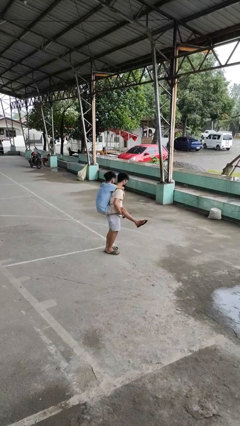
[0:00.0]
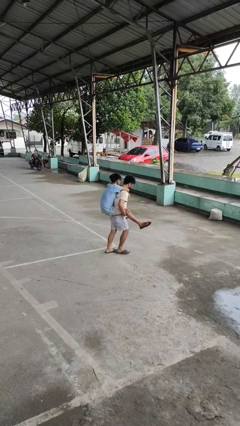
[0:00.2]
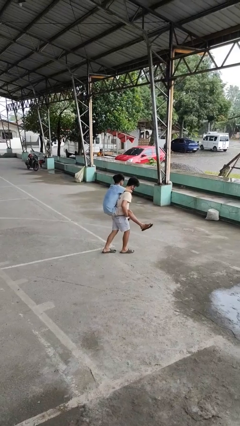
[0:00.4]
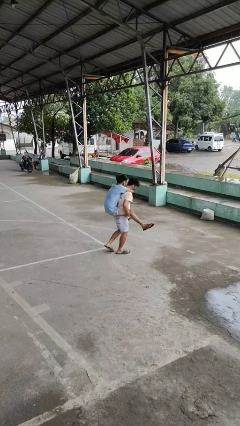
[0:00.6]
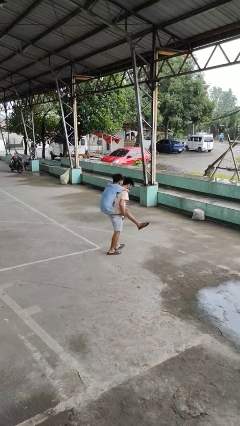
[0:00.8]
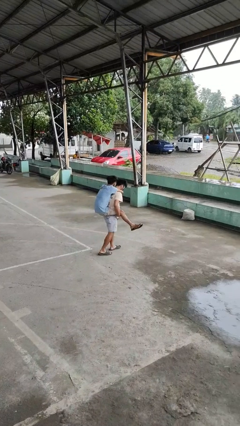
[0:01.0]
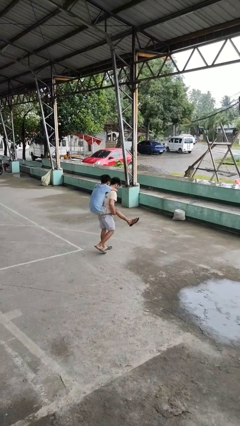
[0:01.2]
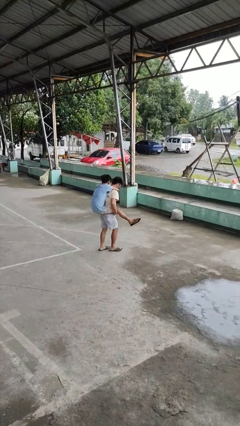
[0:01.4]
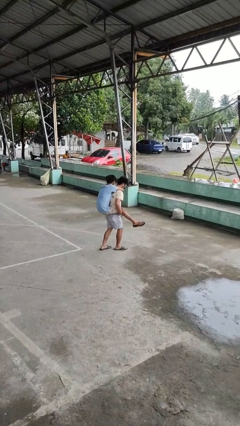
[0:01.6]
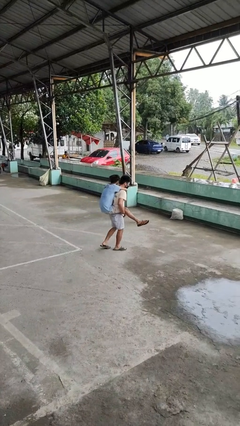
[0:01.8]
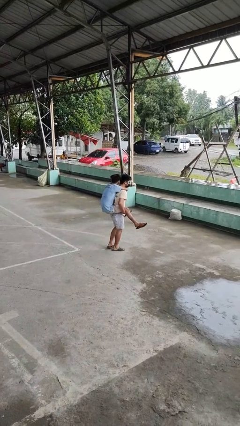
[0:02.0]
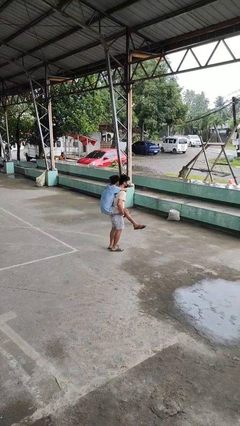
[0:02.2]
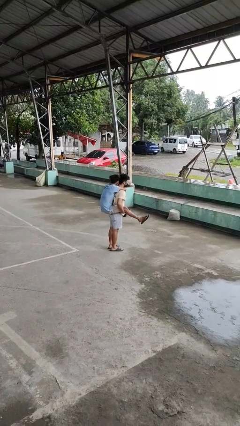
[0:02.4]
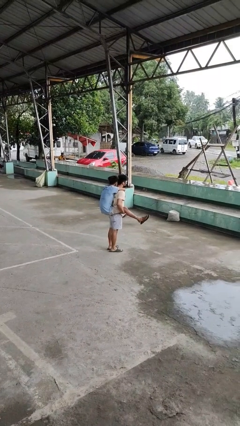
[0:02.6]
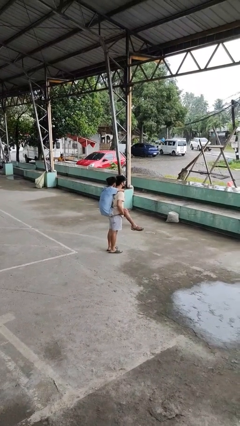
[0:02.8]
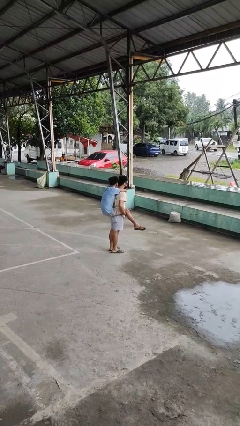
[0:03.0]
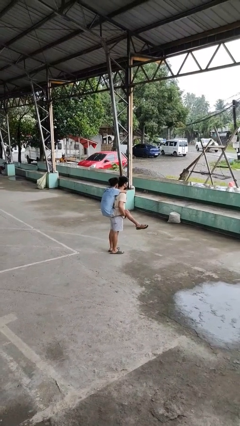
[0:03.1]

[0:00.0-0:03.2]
person carries person on back

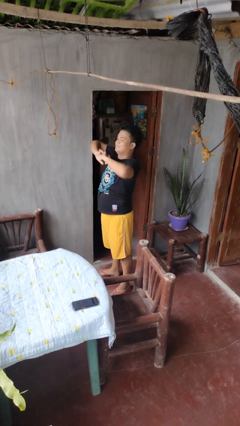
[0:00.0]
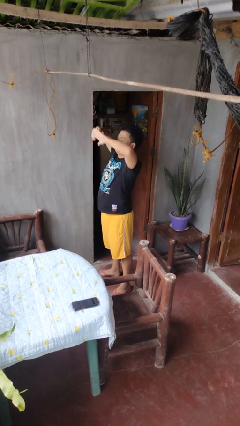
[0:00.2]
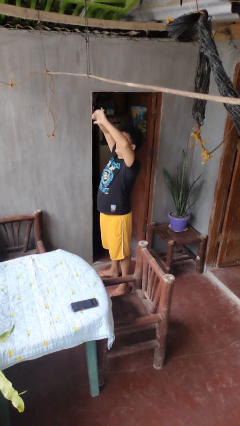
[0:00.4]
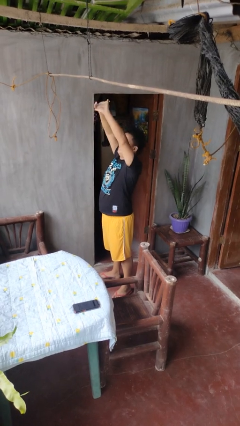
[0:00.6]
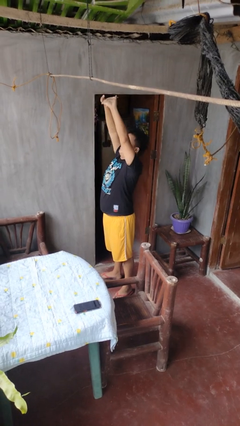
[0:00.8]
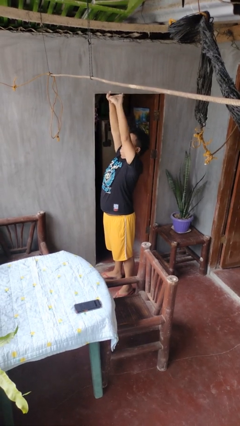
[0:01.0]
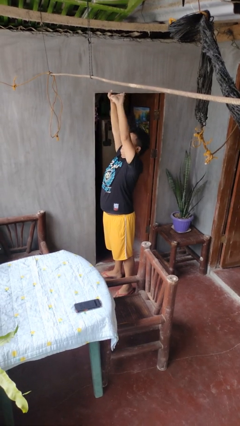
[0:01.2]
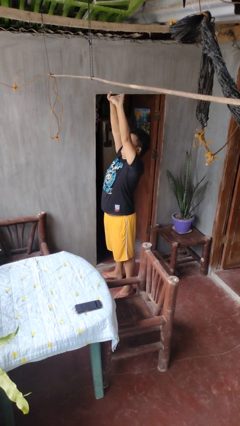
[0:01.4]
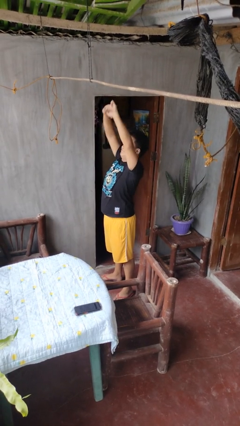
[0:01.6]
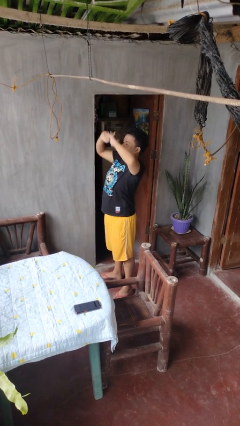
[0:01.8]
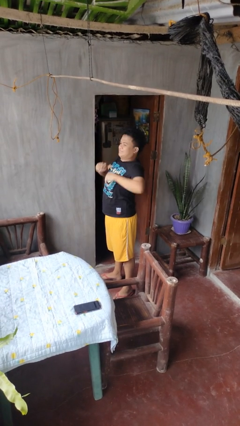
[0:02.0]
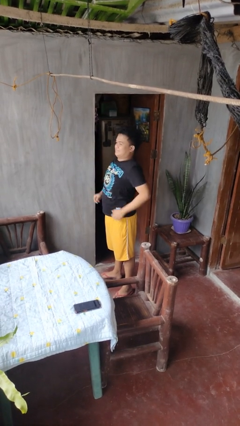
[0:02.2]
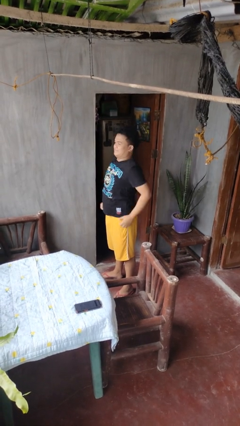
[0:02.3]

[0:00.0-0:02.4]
person stretches arms over head

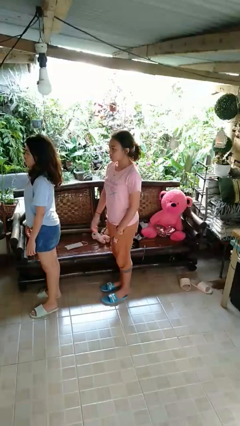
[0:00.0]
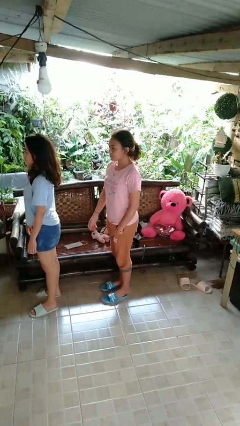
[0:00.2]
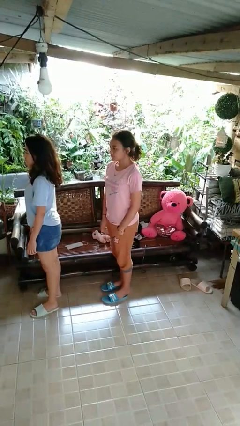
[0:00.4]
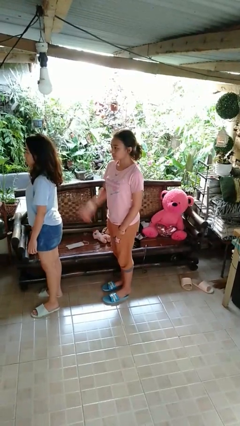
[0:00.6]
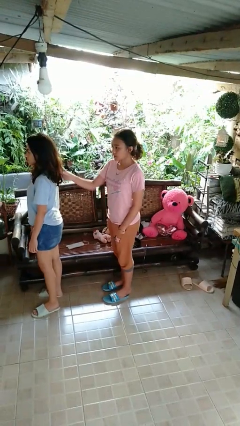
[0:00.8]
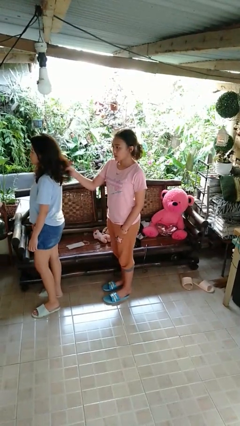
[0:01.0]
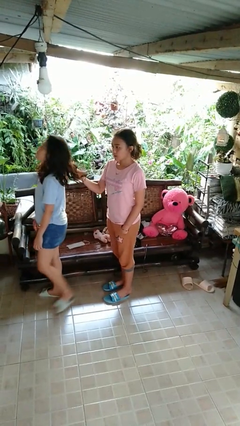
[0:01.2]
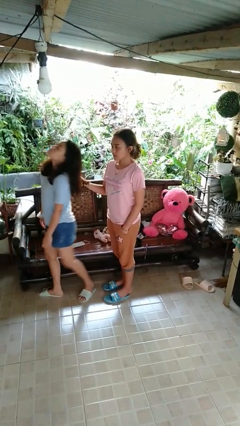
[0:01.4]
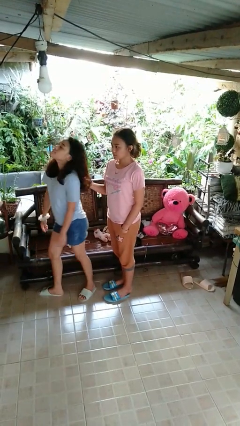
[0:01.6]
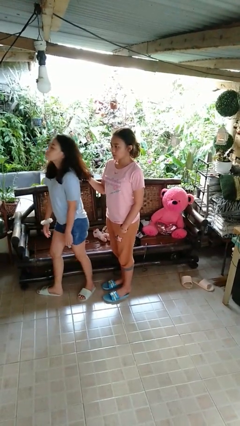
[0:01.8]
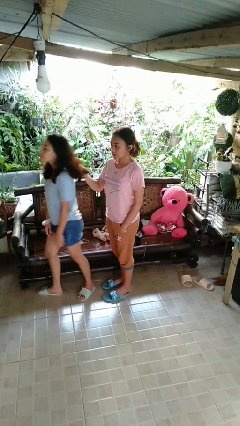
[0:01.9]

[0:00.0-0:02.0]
person grabs person by hair

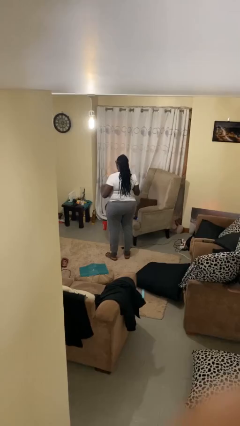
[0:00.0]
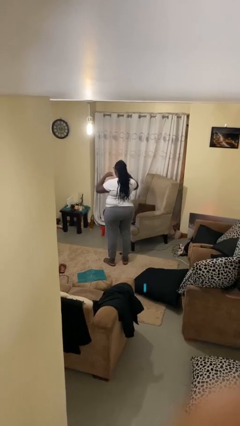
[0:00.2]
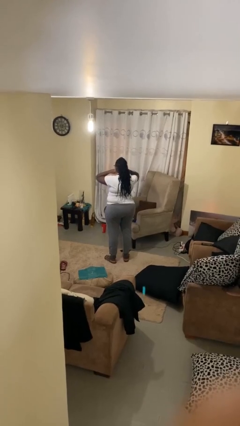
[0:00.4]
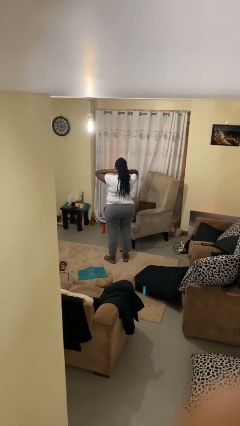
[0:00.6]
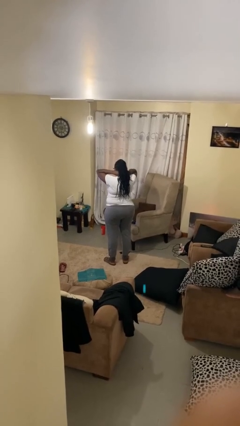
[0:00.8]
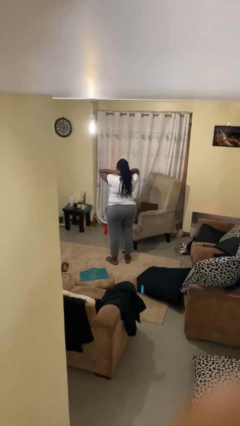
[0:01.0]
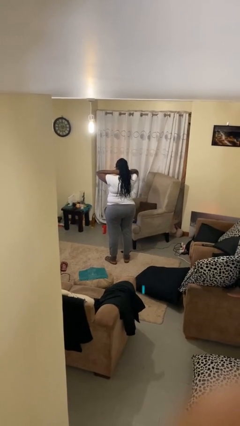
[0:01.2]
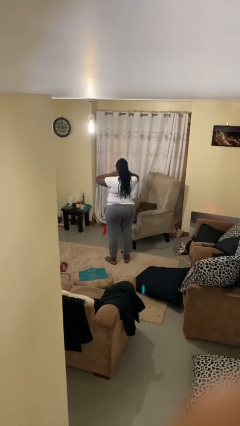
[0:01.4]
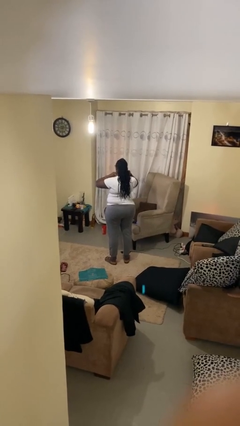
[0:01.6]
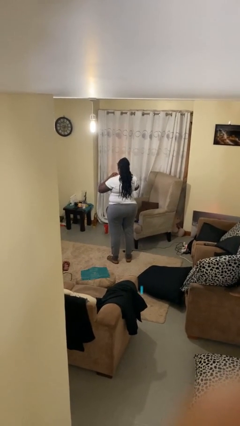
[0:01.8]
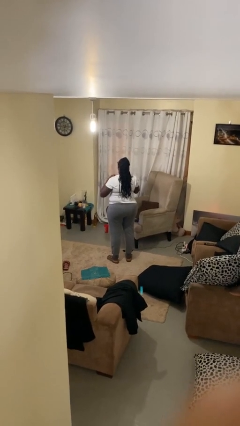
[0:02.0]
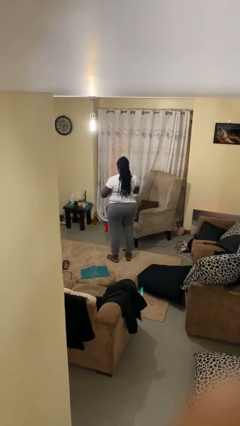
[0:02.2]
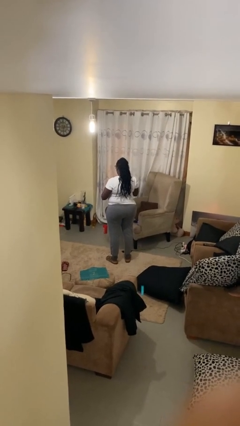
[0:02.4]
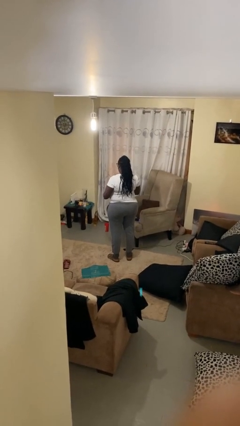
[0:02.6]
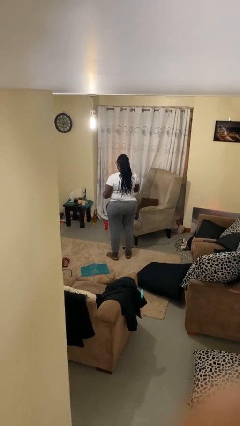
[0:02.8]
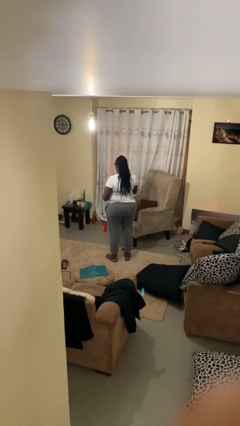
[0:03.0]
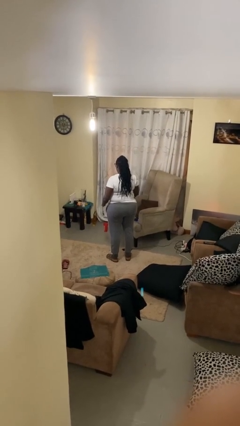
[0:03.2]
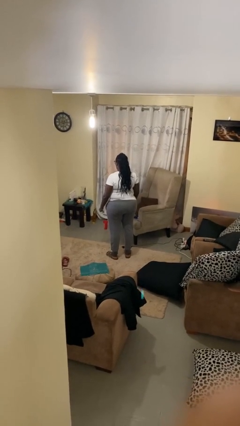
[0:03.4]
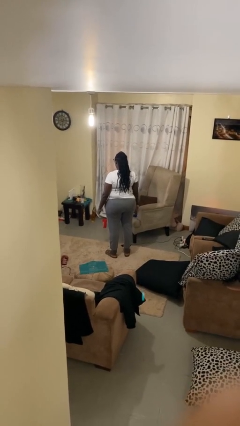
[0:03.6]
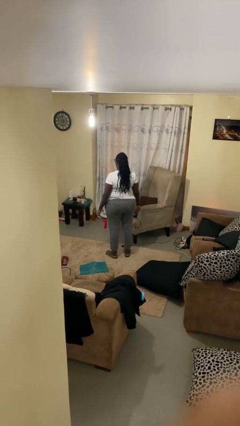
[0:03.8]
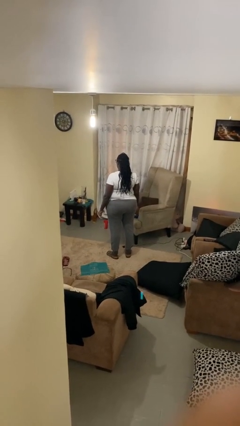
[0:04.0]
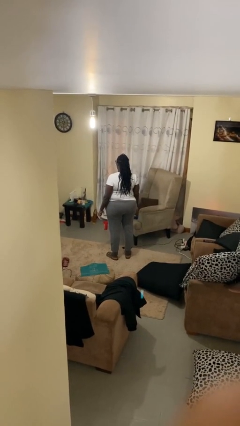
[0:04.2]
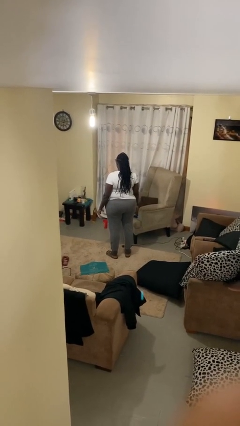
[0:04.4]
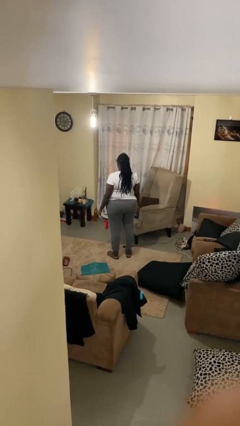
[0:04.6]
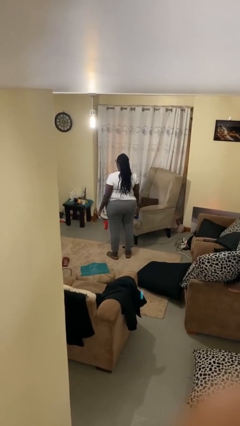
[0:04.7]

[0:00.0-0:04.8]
person takes off necklace

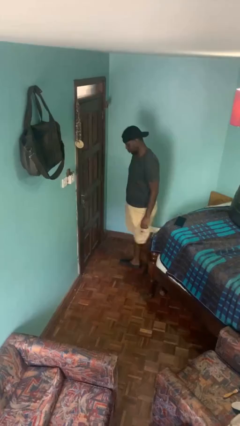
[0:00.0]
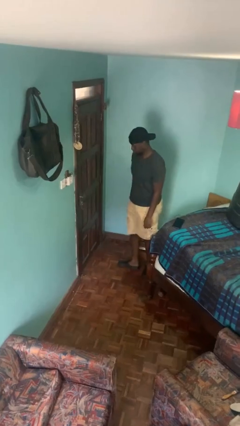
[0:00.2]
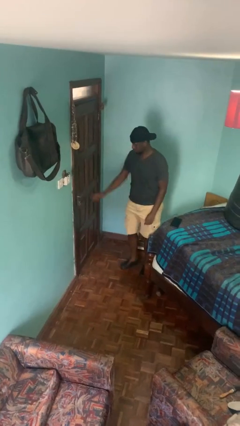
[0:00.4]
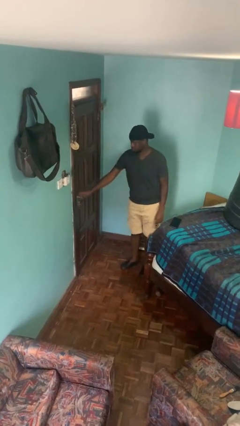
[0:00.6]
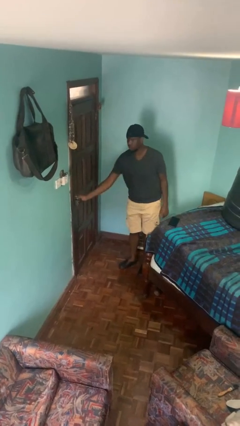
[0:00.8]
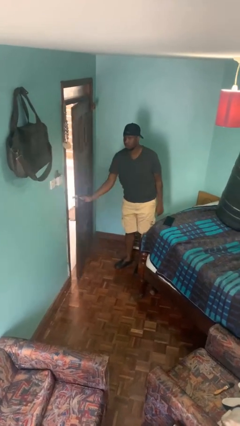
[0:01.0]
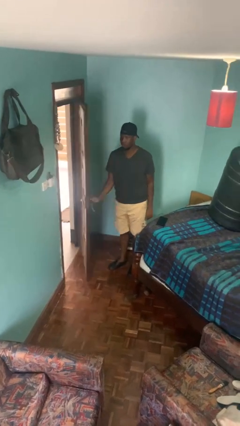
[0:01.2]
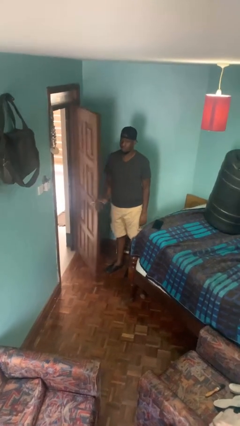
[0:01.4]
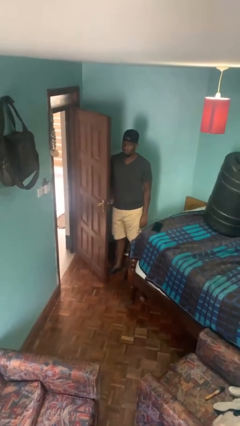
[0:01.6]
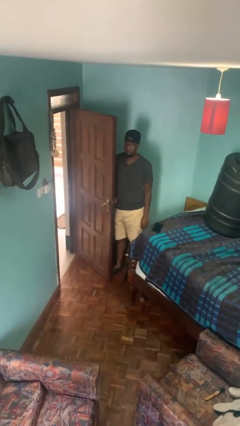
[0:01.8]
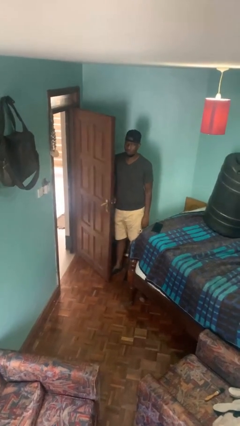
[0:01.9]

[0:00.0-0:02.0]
person opens facility door

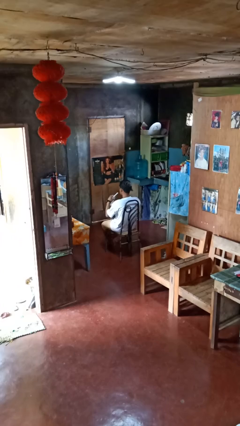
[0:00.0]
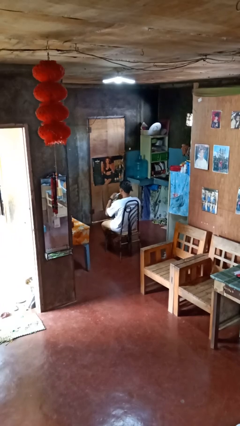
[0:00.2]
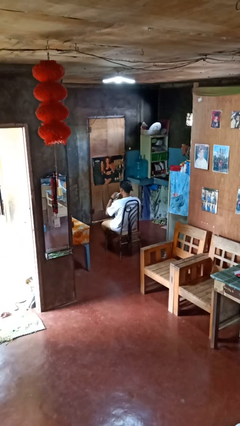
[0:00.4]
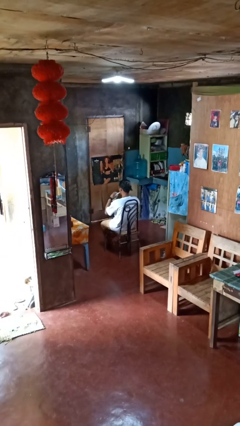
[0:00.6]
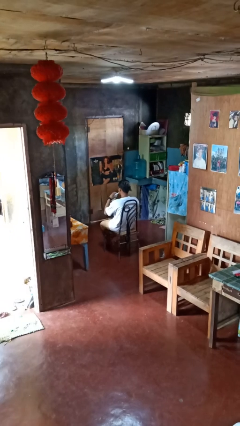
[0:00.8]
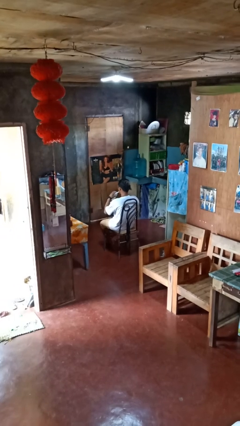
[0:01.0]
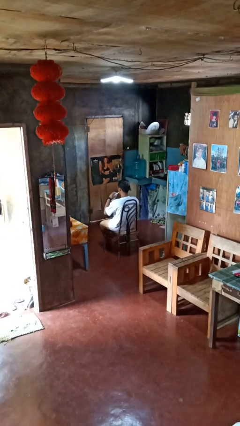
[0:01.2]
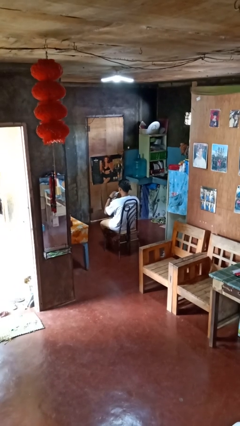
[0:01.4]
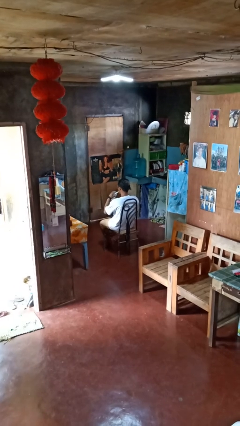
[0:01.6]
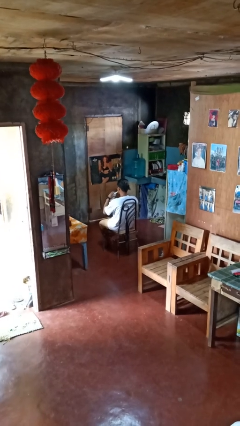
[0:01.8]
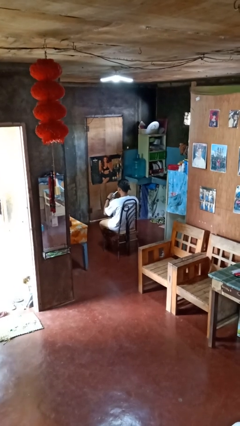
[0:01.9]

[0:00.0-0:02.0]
person drinks from straw

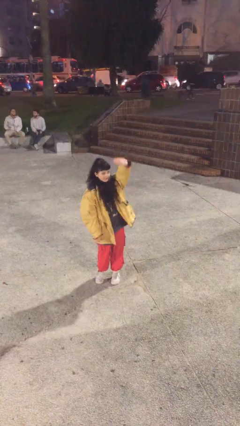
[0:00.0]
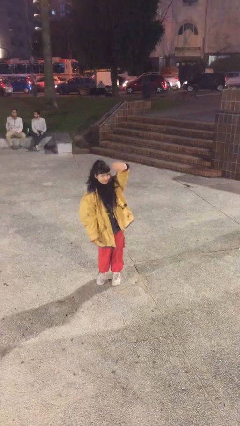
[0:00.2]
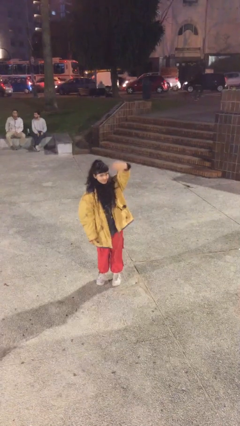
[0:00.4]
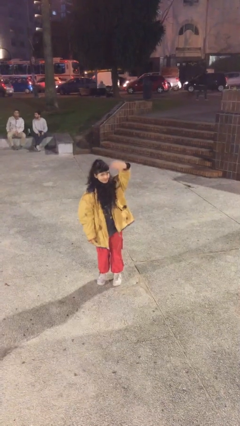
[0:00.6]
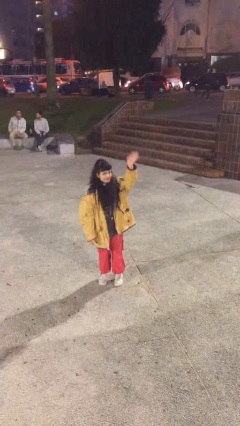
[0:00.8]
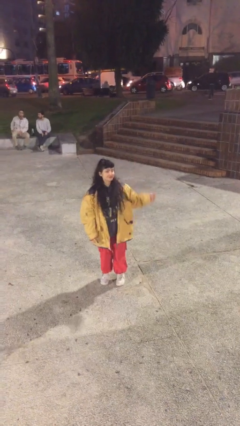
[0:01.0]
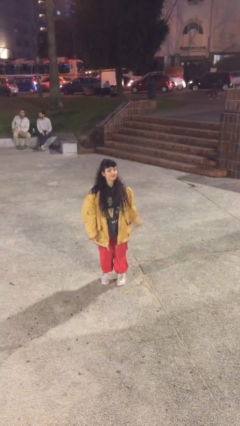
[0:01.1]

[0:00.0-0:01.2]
person waves at person
